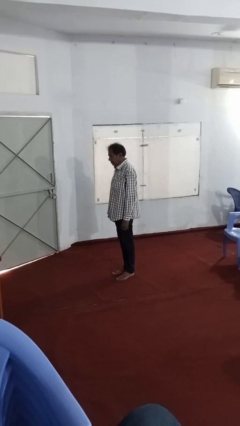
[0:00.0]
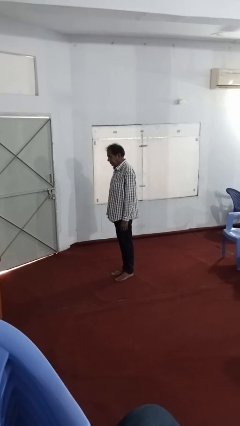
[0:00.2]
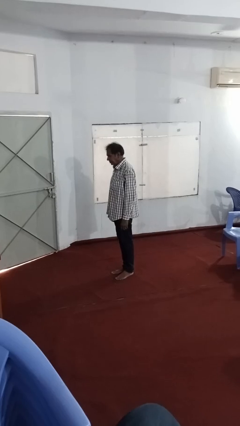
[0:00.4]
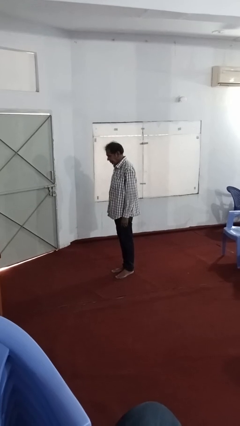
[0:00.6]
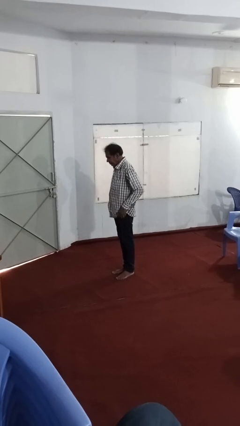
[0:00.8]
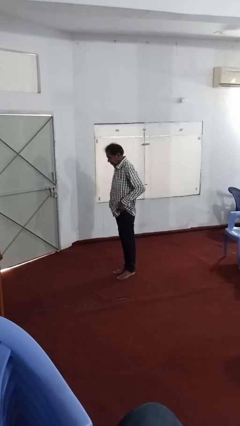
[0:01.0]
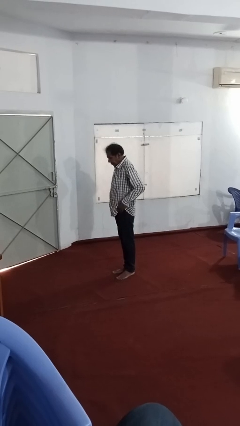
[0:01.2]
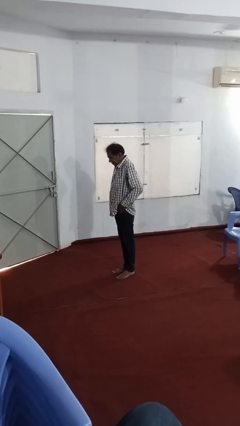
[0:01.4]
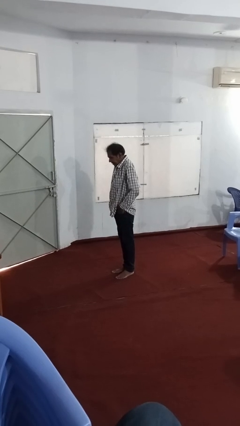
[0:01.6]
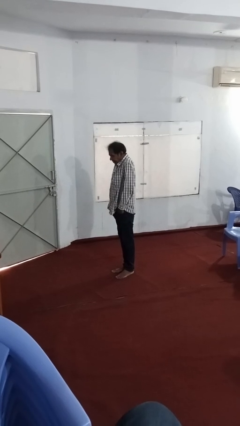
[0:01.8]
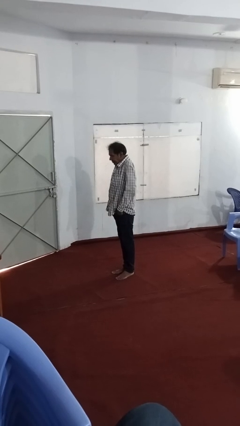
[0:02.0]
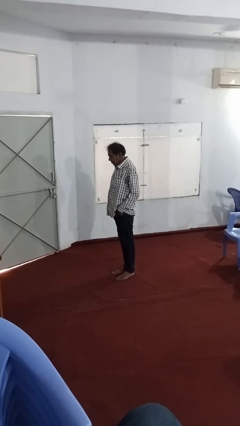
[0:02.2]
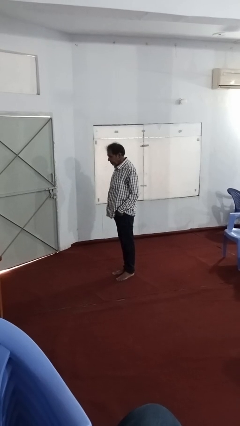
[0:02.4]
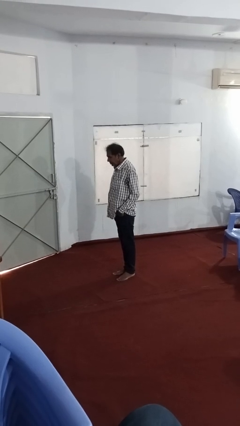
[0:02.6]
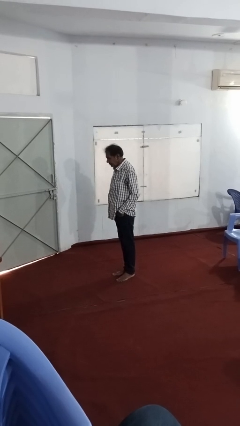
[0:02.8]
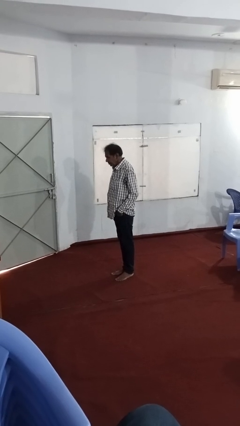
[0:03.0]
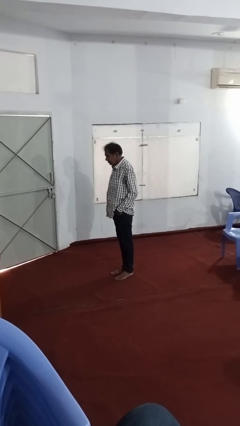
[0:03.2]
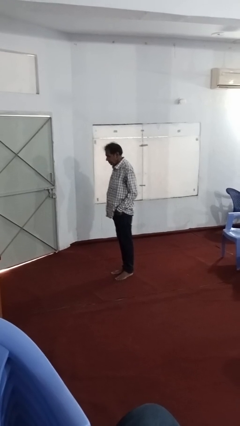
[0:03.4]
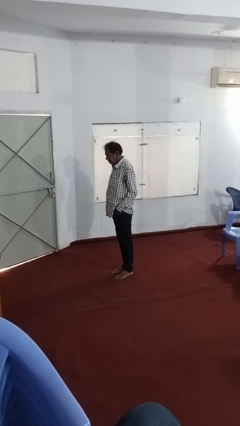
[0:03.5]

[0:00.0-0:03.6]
person puts hands in back pockets

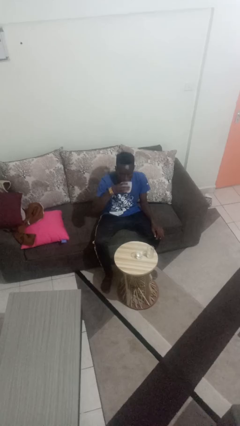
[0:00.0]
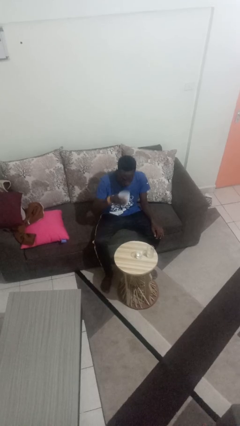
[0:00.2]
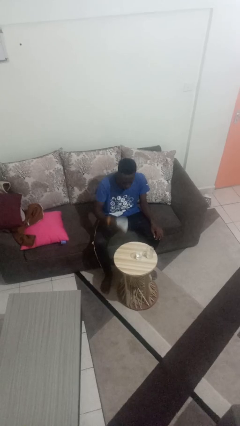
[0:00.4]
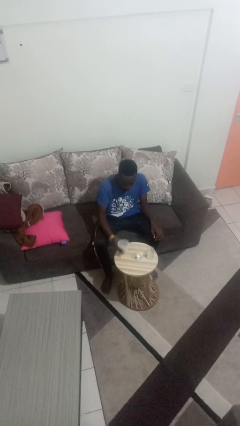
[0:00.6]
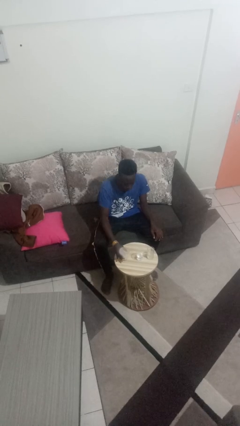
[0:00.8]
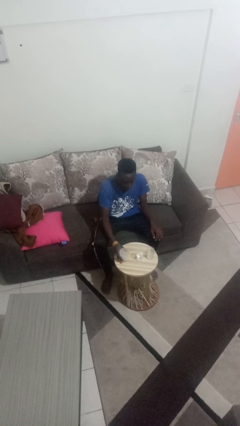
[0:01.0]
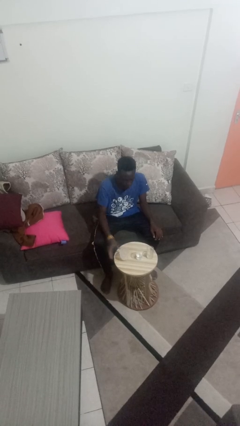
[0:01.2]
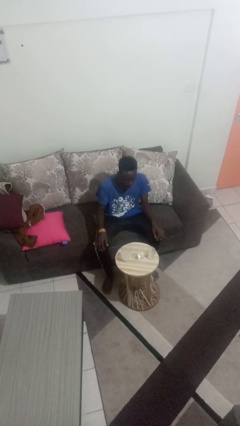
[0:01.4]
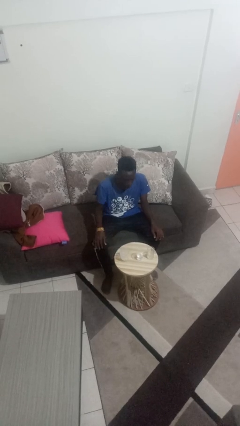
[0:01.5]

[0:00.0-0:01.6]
person puts down object on table

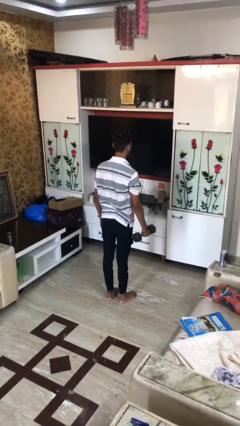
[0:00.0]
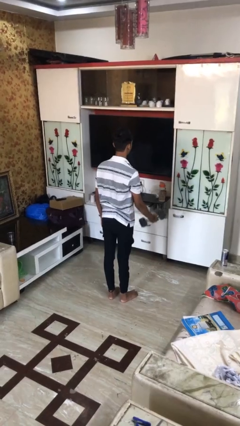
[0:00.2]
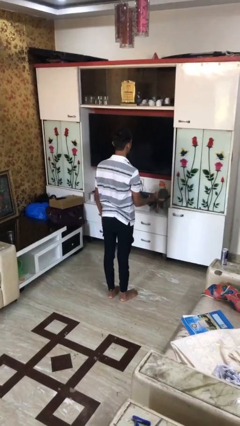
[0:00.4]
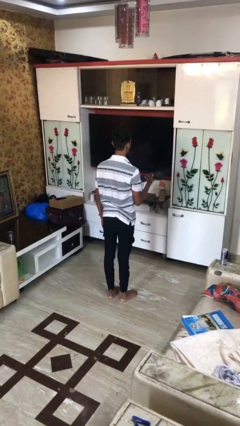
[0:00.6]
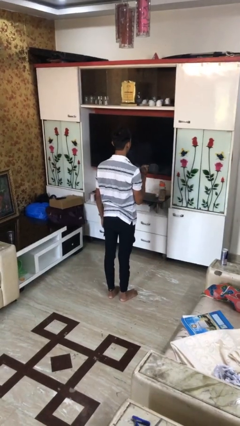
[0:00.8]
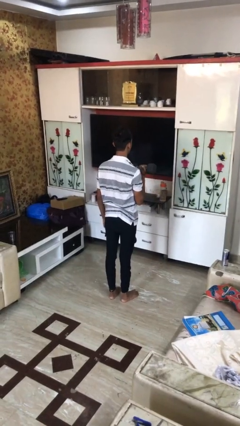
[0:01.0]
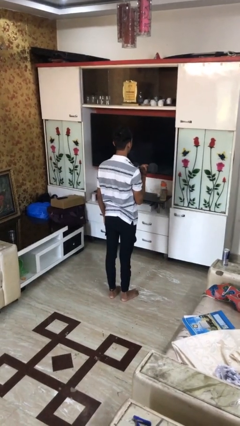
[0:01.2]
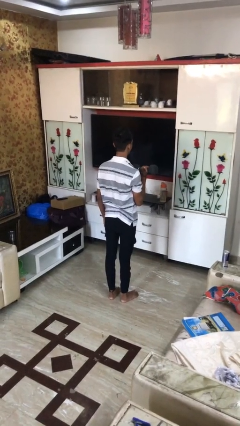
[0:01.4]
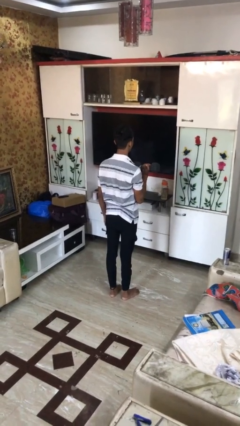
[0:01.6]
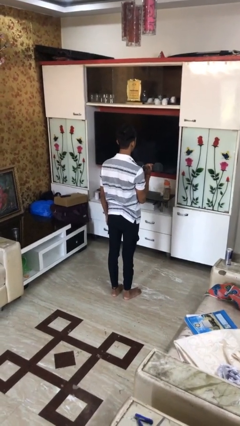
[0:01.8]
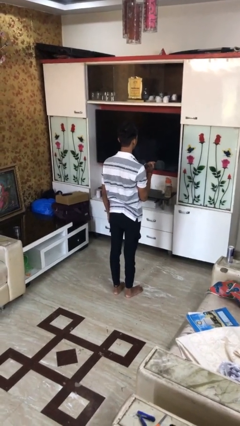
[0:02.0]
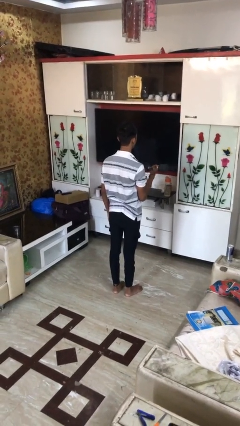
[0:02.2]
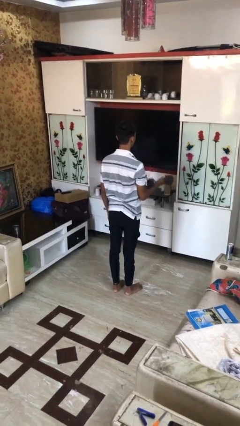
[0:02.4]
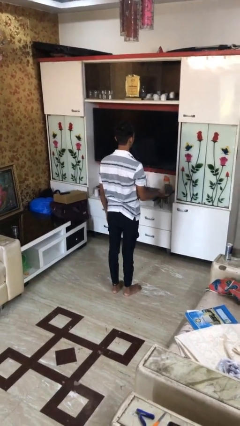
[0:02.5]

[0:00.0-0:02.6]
person lifts dumbbells

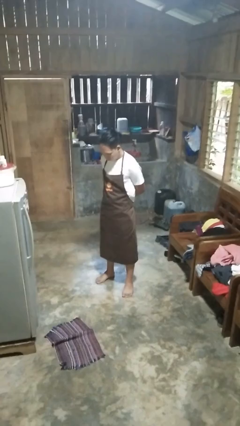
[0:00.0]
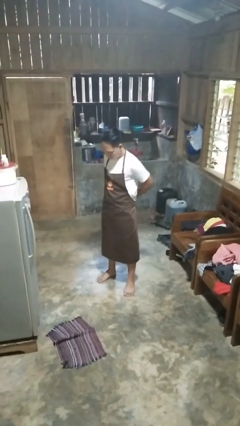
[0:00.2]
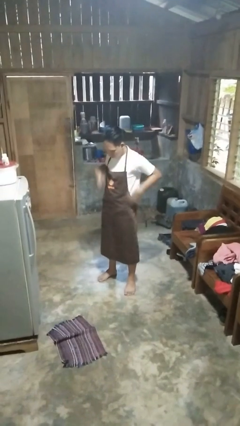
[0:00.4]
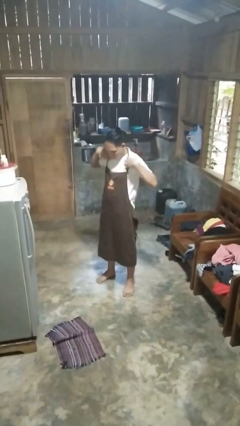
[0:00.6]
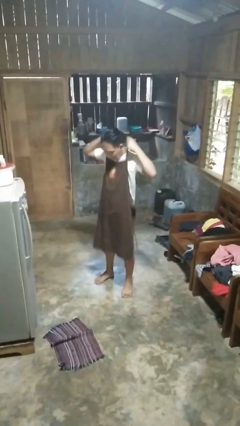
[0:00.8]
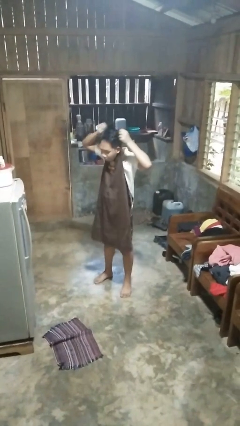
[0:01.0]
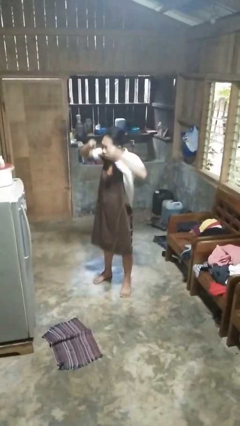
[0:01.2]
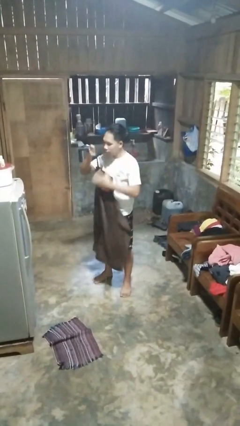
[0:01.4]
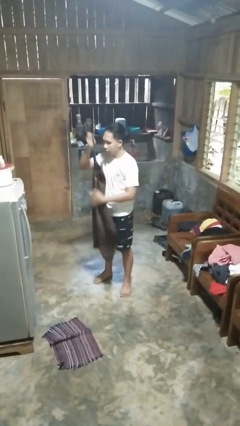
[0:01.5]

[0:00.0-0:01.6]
person takes off apron

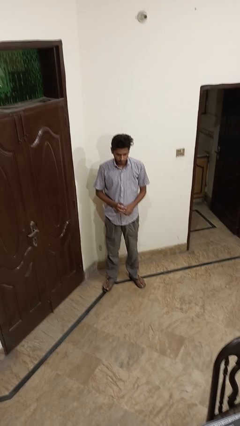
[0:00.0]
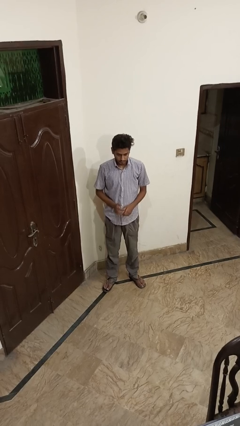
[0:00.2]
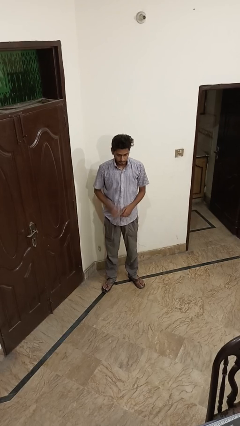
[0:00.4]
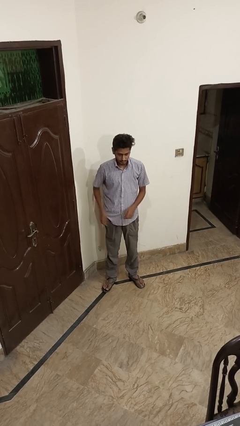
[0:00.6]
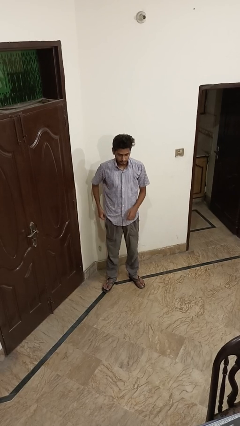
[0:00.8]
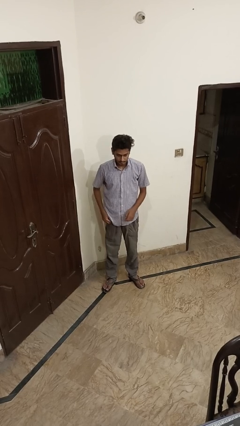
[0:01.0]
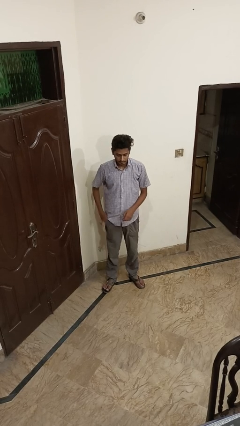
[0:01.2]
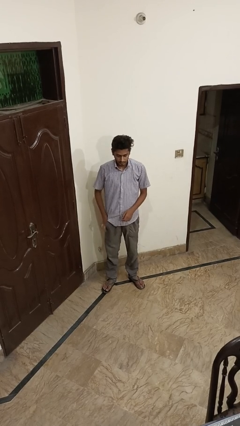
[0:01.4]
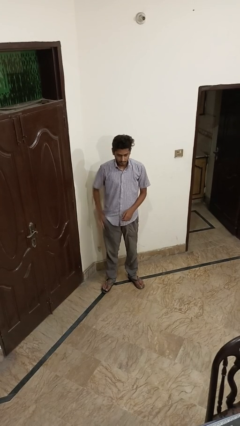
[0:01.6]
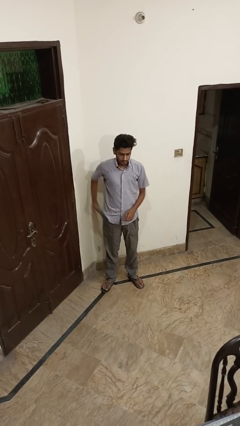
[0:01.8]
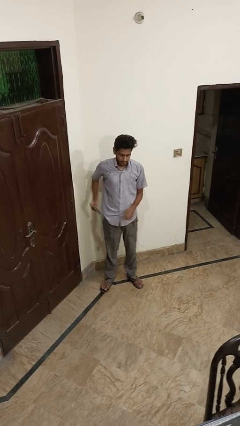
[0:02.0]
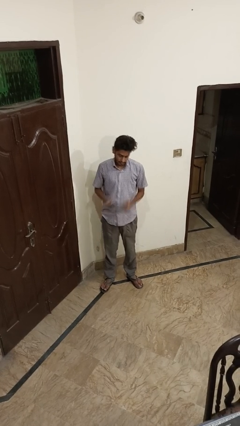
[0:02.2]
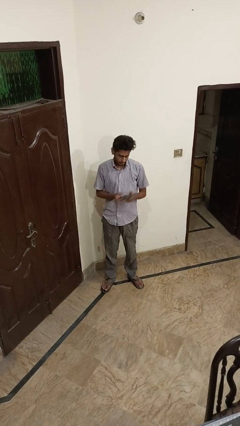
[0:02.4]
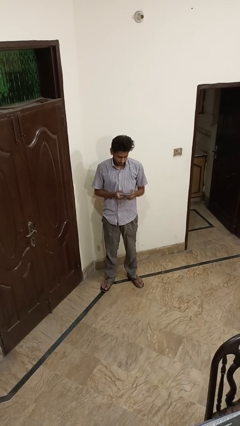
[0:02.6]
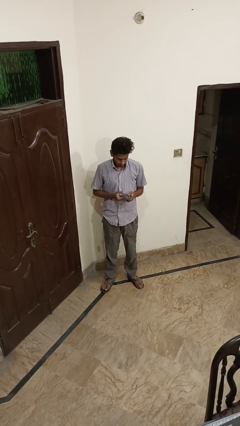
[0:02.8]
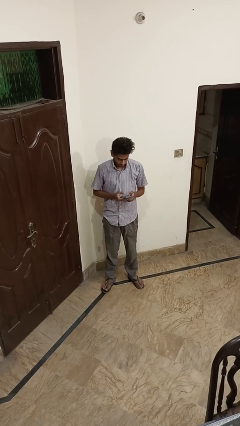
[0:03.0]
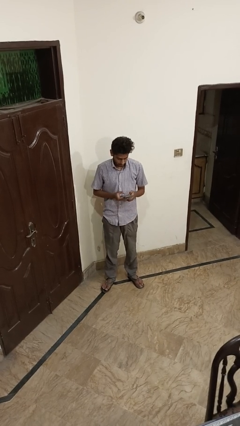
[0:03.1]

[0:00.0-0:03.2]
person takes phone from pocket

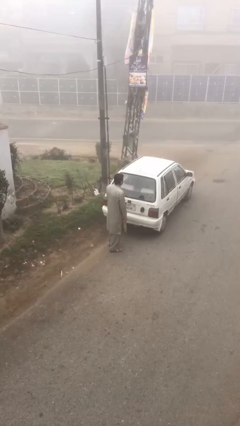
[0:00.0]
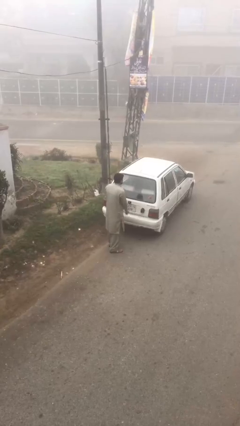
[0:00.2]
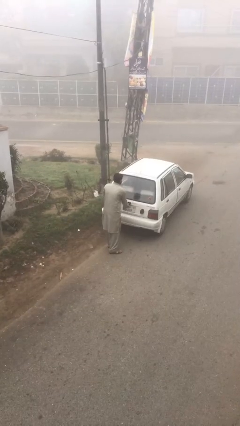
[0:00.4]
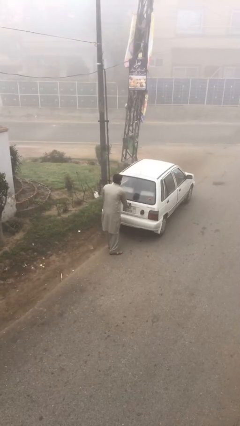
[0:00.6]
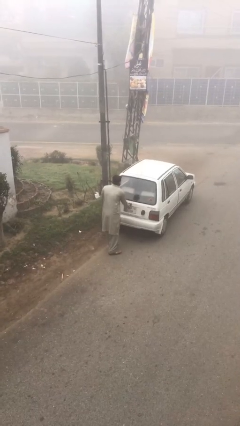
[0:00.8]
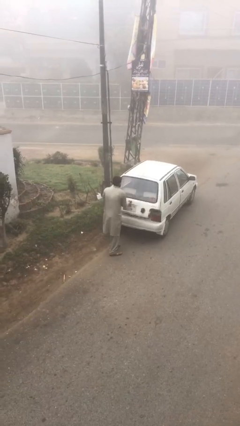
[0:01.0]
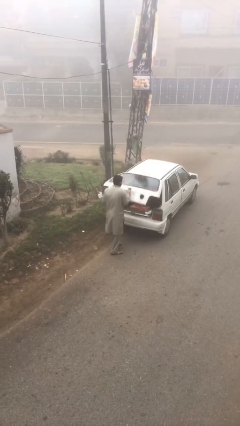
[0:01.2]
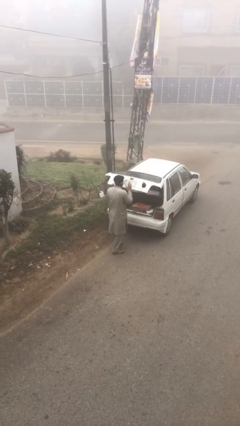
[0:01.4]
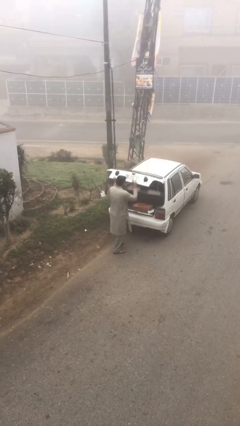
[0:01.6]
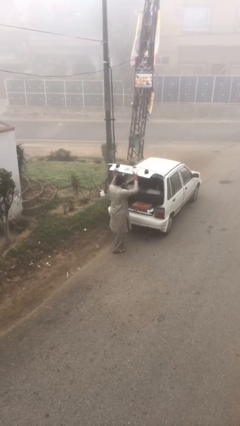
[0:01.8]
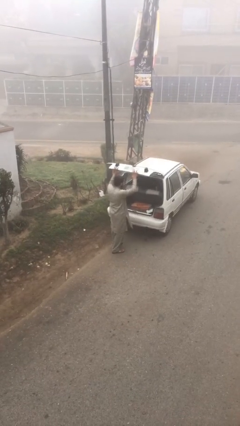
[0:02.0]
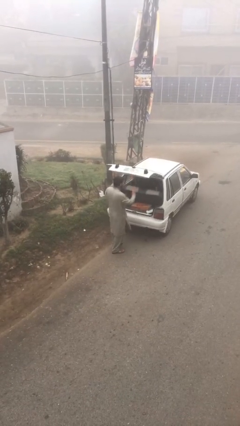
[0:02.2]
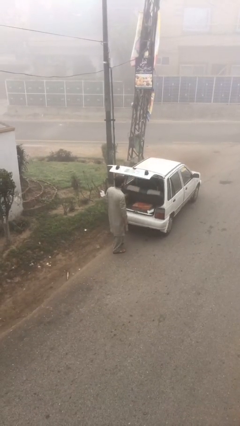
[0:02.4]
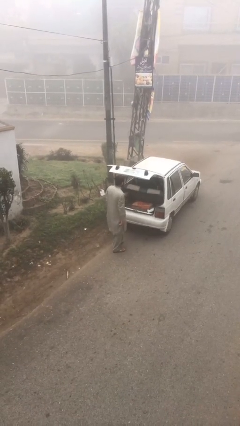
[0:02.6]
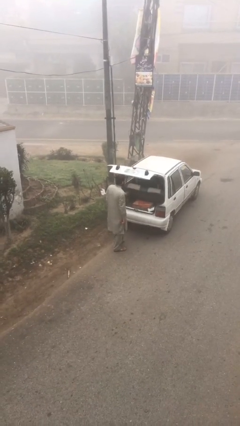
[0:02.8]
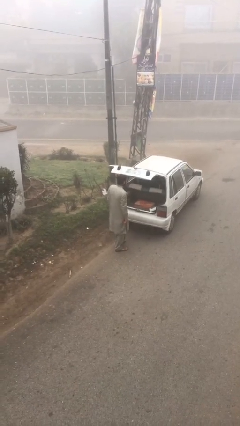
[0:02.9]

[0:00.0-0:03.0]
person opens car trunk

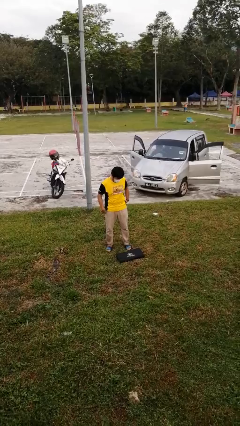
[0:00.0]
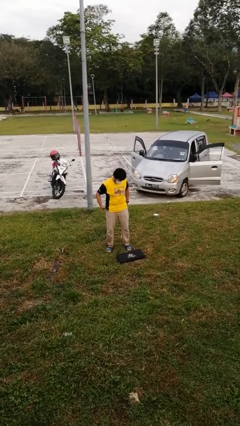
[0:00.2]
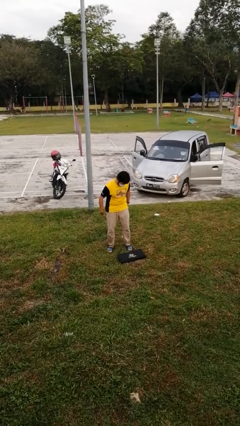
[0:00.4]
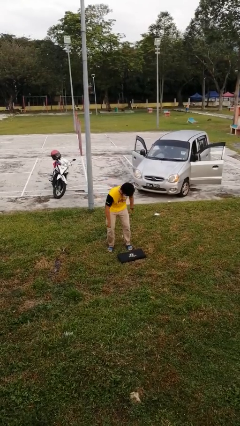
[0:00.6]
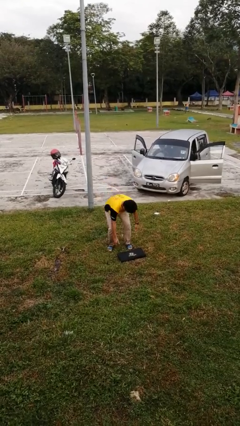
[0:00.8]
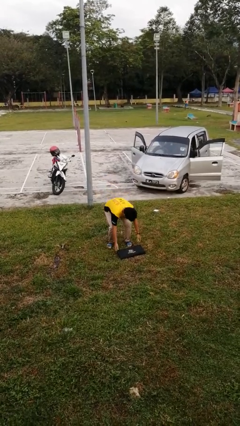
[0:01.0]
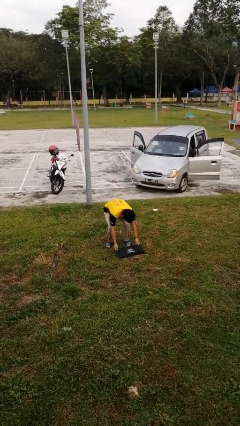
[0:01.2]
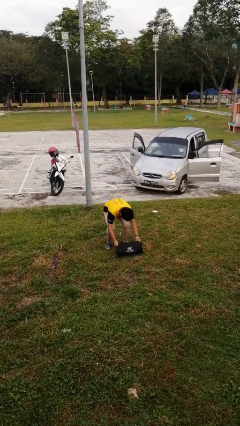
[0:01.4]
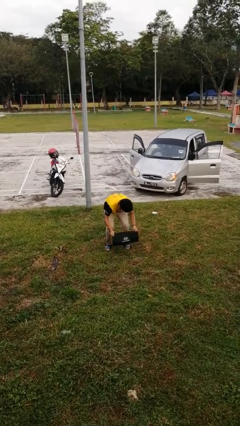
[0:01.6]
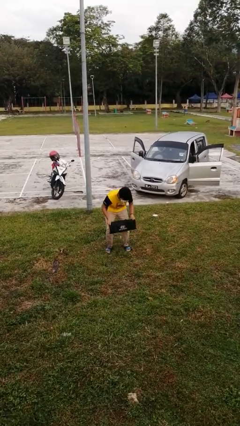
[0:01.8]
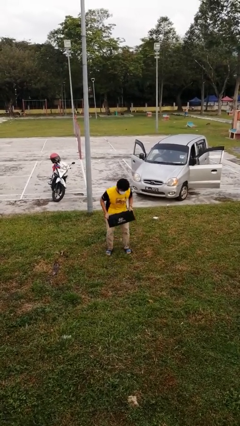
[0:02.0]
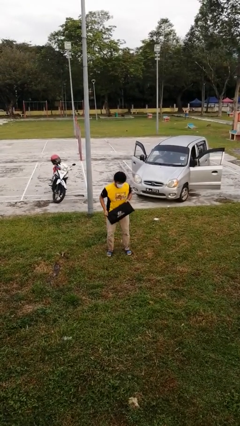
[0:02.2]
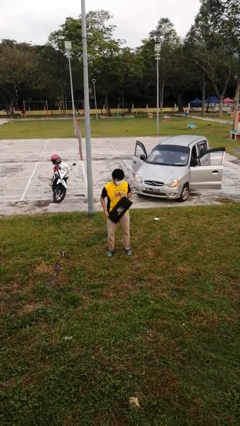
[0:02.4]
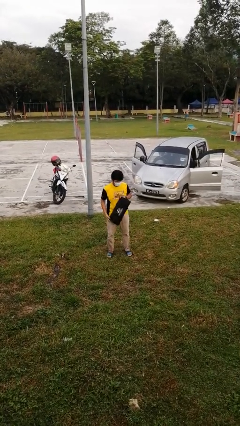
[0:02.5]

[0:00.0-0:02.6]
person picks up object from floor
